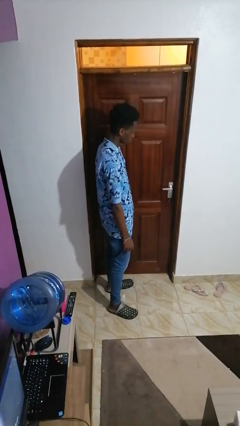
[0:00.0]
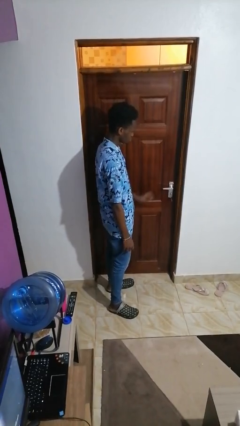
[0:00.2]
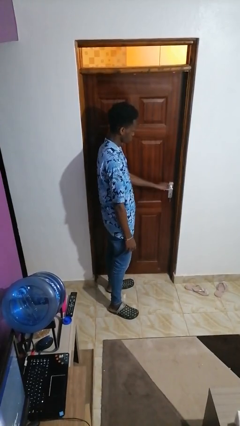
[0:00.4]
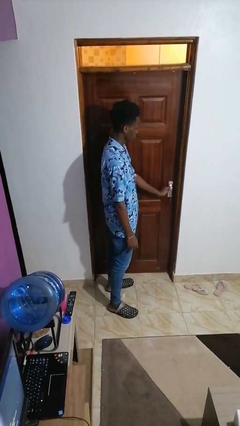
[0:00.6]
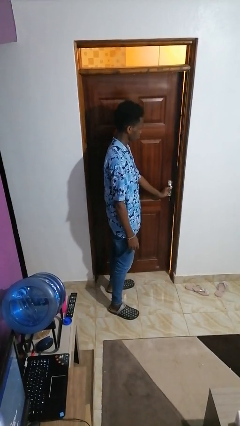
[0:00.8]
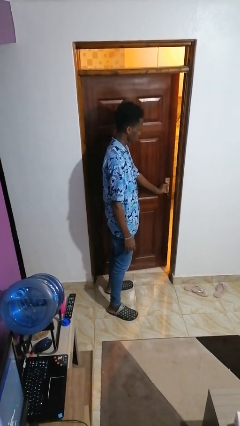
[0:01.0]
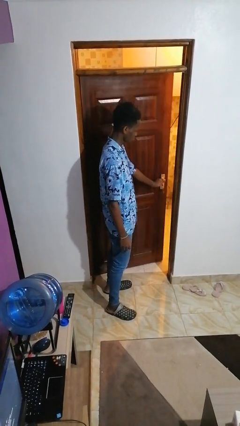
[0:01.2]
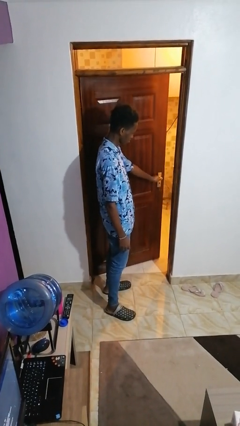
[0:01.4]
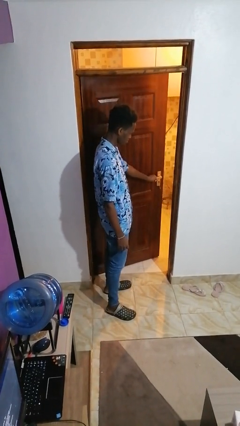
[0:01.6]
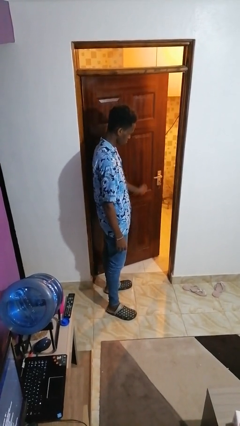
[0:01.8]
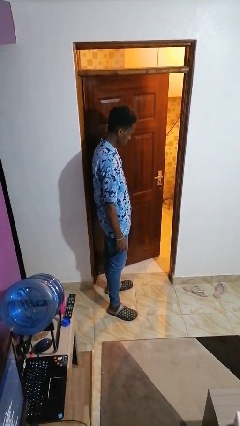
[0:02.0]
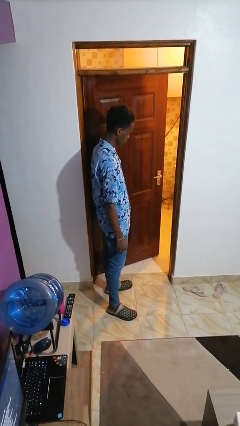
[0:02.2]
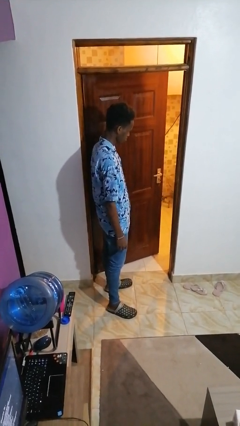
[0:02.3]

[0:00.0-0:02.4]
person opens facility door

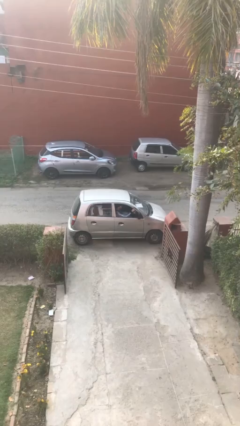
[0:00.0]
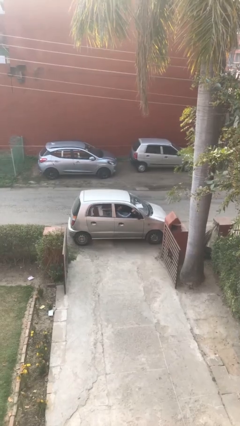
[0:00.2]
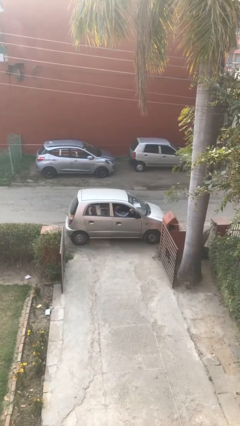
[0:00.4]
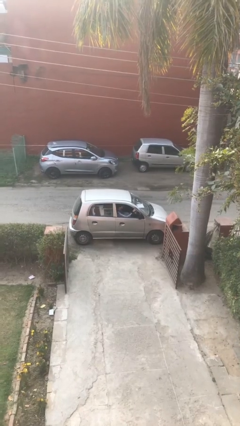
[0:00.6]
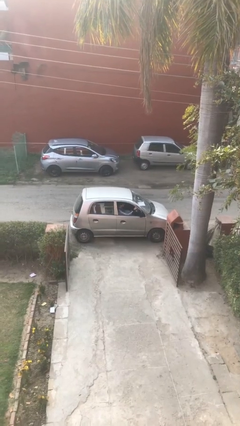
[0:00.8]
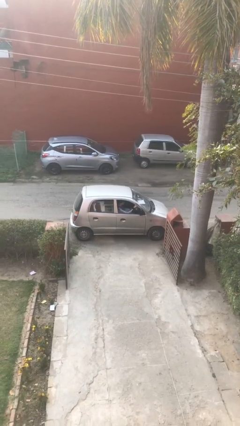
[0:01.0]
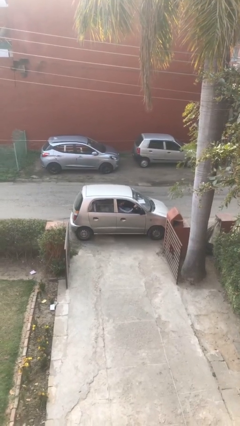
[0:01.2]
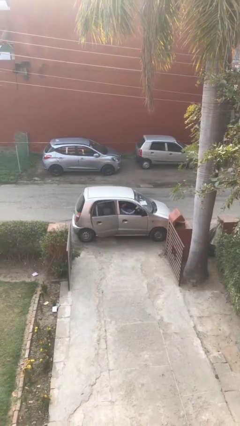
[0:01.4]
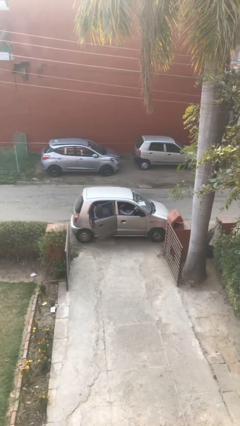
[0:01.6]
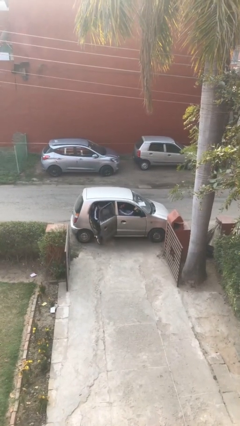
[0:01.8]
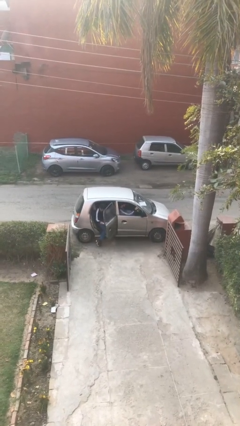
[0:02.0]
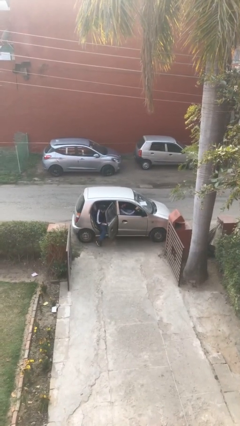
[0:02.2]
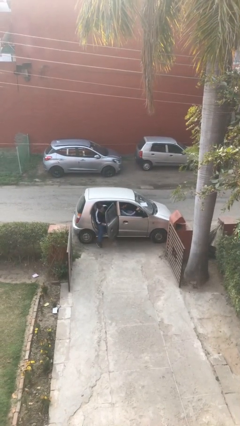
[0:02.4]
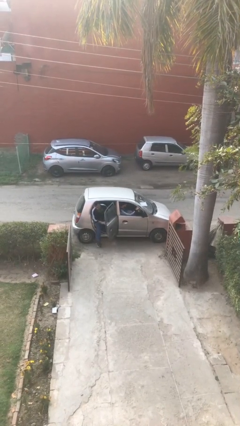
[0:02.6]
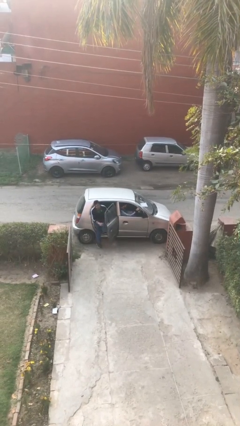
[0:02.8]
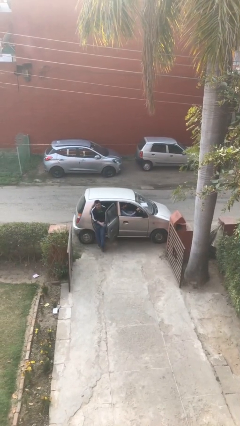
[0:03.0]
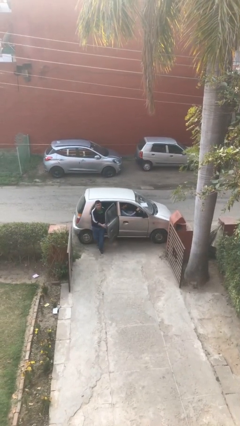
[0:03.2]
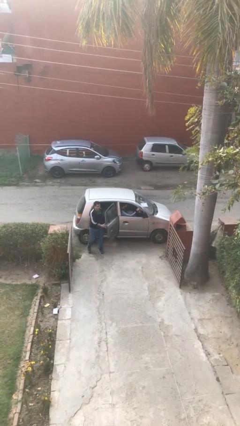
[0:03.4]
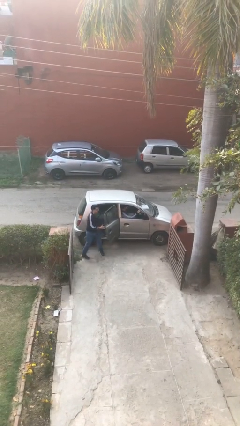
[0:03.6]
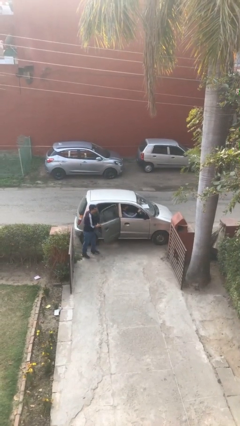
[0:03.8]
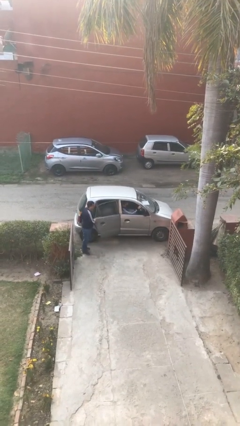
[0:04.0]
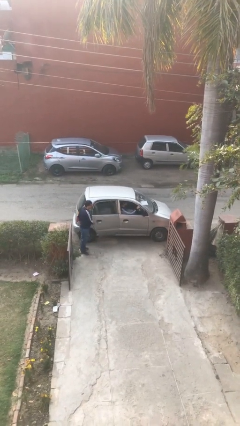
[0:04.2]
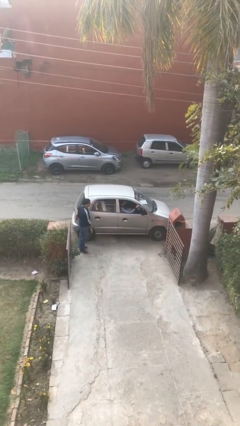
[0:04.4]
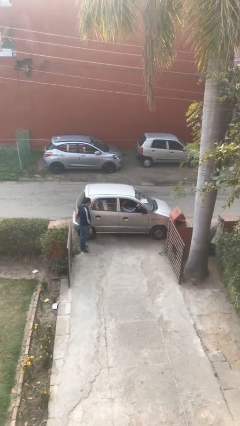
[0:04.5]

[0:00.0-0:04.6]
car drops off person

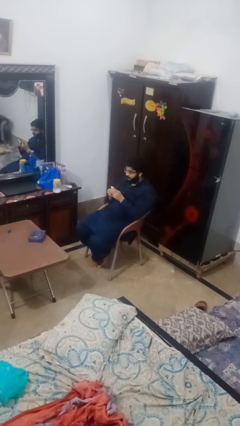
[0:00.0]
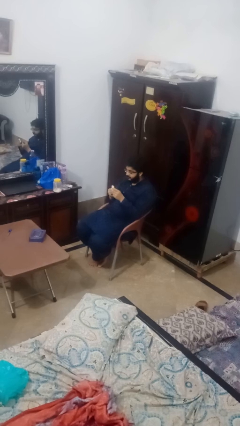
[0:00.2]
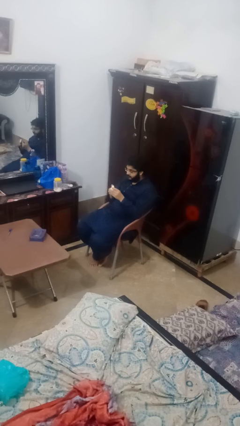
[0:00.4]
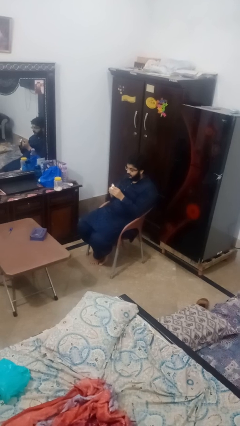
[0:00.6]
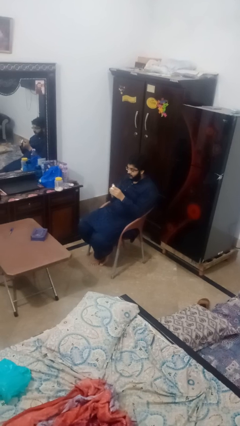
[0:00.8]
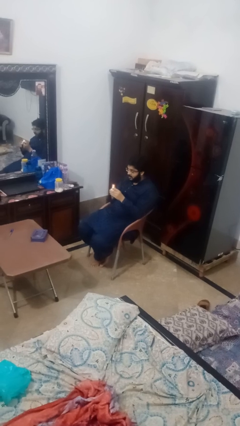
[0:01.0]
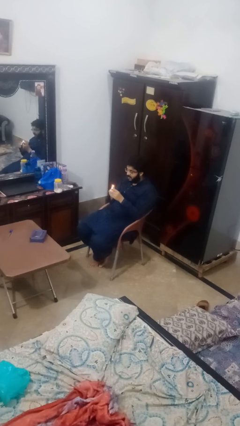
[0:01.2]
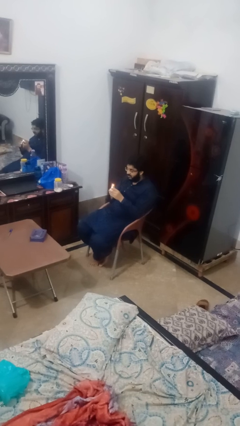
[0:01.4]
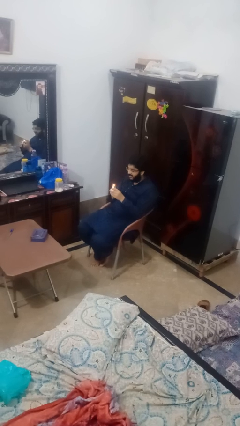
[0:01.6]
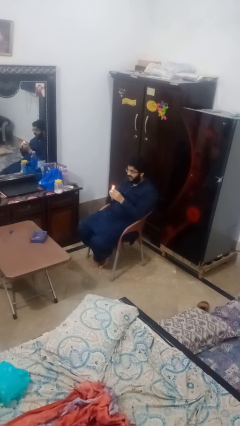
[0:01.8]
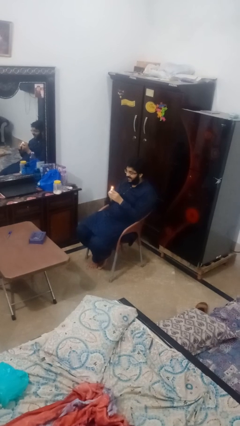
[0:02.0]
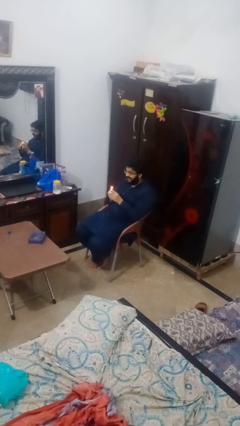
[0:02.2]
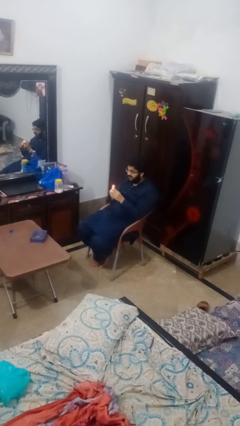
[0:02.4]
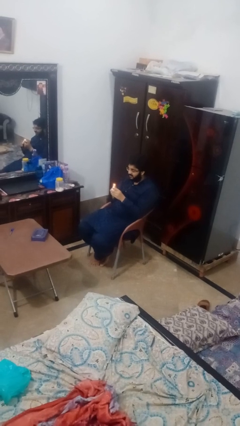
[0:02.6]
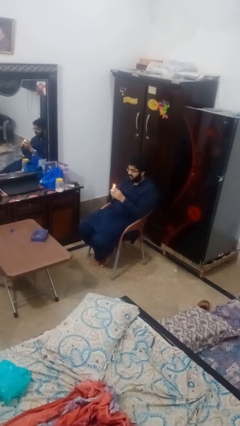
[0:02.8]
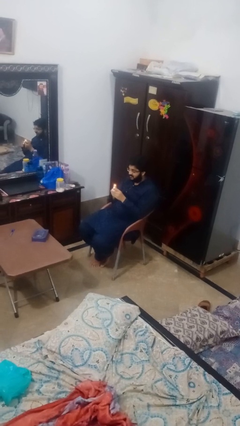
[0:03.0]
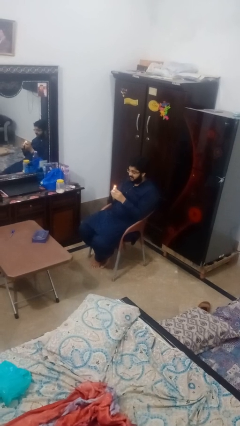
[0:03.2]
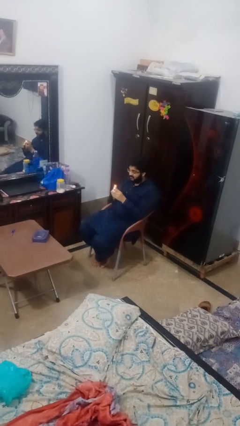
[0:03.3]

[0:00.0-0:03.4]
person lights candle

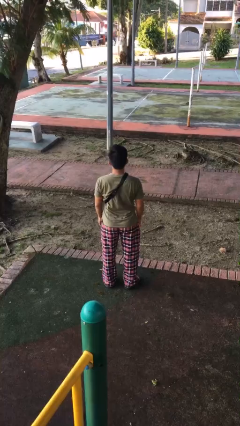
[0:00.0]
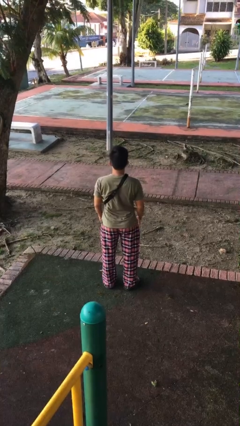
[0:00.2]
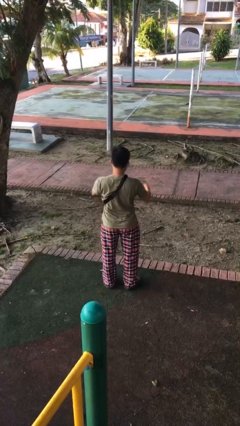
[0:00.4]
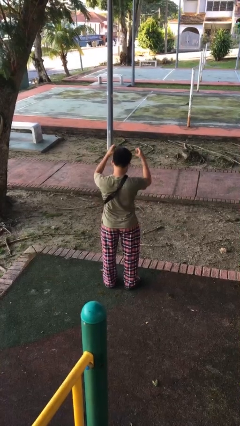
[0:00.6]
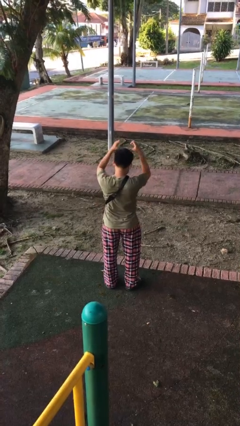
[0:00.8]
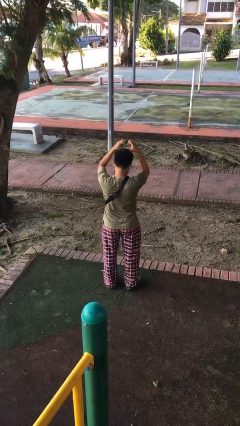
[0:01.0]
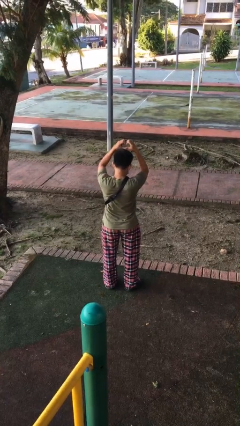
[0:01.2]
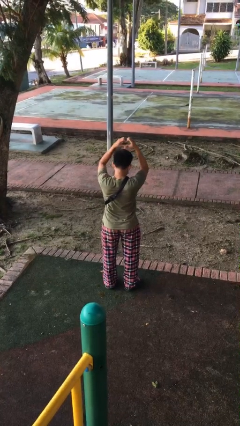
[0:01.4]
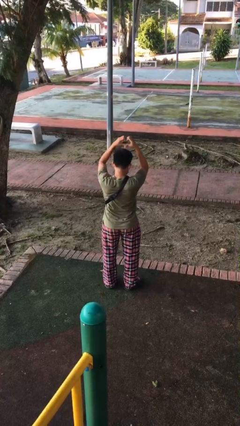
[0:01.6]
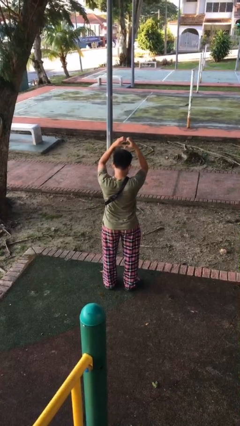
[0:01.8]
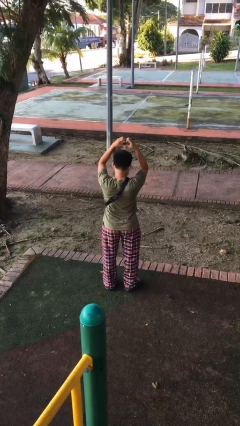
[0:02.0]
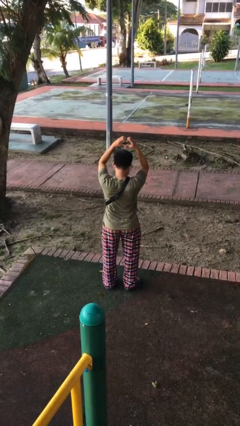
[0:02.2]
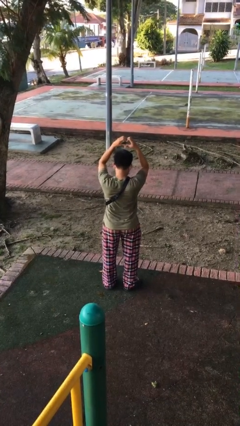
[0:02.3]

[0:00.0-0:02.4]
person gestures heart

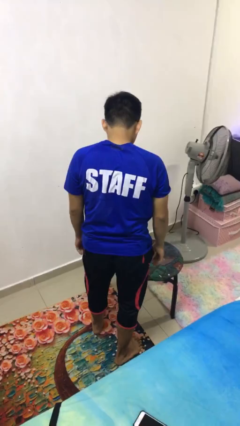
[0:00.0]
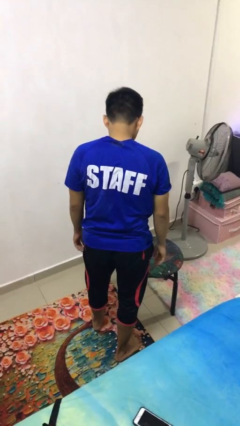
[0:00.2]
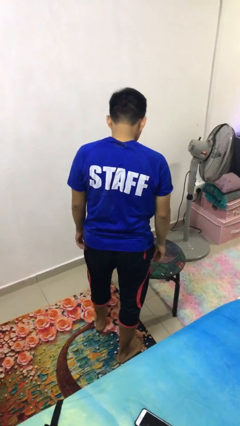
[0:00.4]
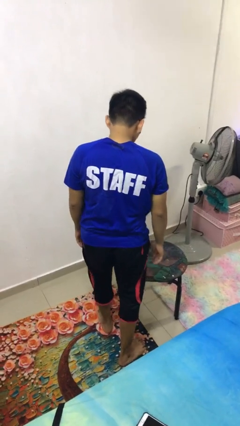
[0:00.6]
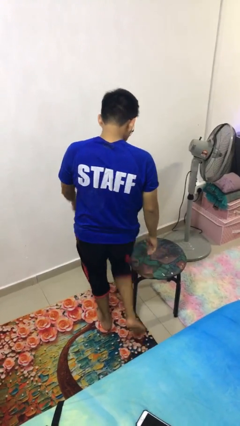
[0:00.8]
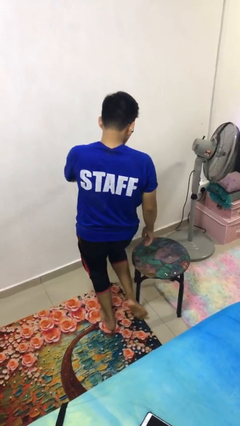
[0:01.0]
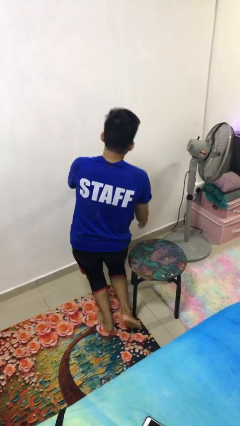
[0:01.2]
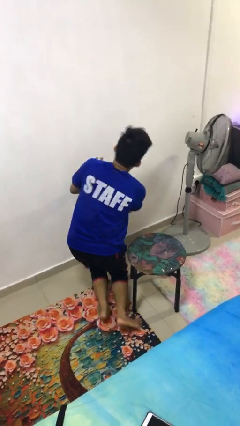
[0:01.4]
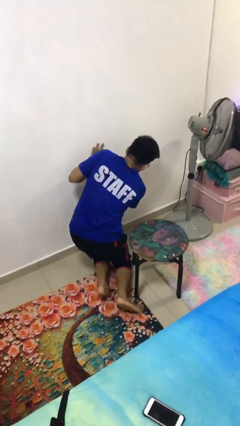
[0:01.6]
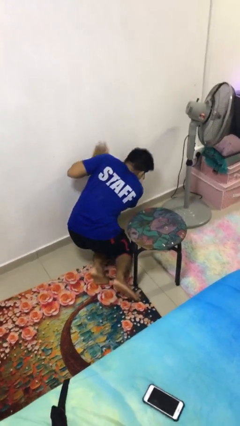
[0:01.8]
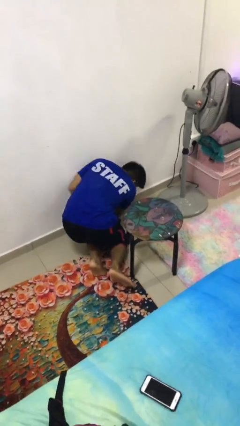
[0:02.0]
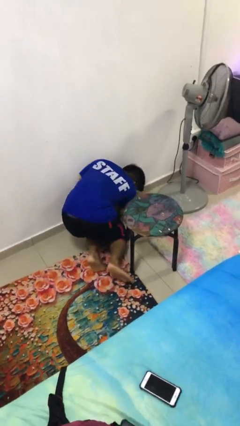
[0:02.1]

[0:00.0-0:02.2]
person trips on object on floor

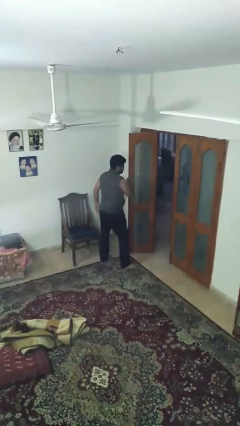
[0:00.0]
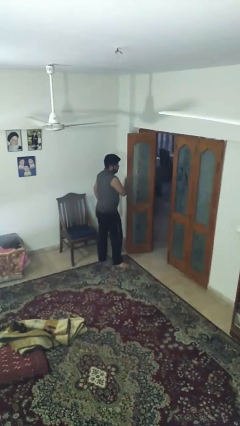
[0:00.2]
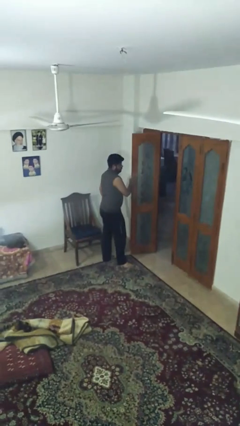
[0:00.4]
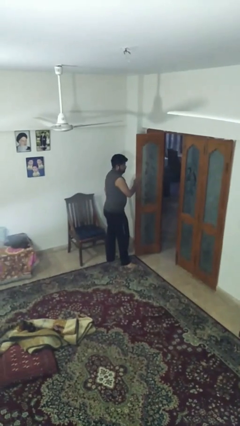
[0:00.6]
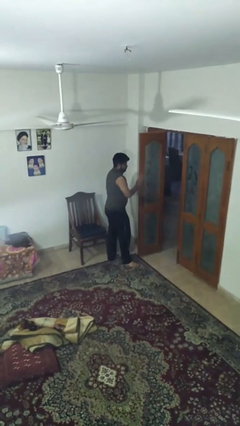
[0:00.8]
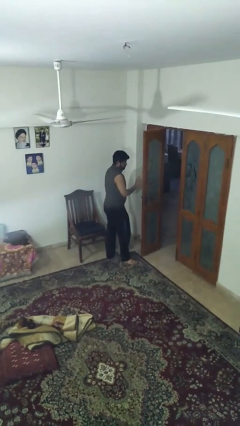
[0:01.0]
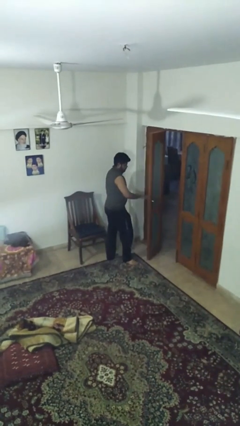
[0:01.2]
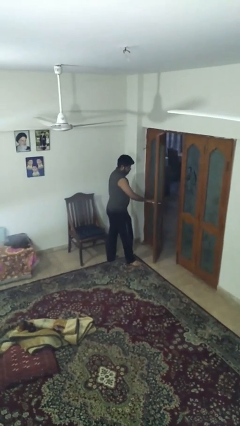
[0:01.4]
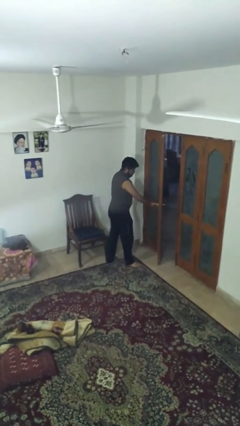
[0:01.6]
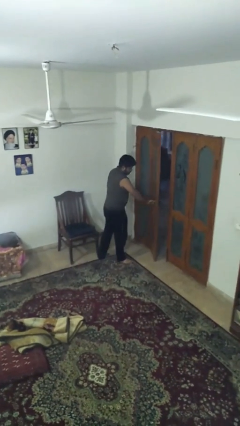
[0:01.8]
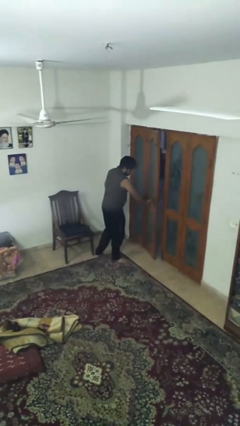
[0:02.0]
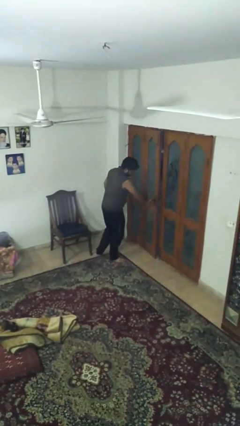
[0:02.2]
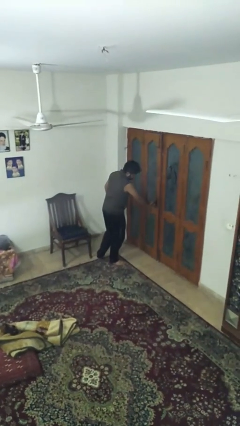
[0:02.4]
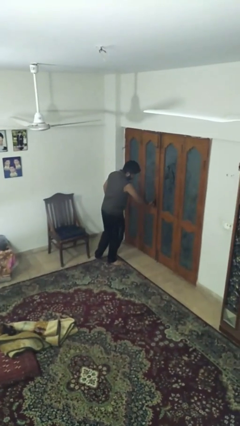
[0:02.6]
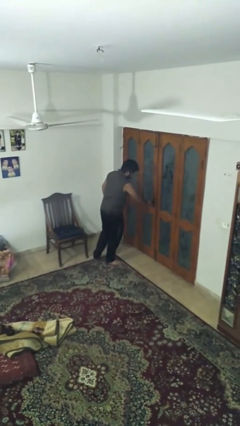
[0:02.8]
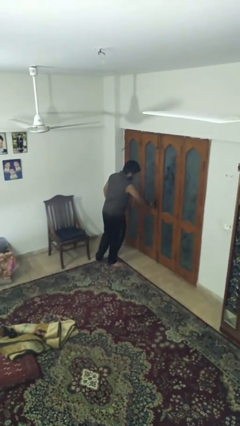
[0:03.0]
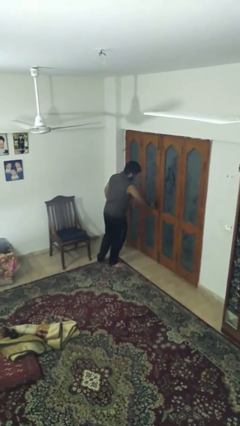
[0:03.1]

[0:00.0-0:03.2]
person closes facility door
